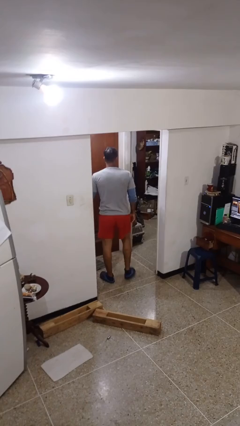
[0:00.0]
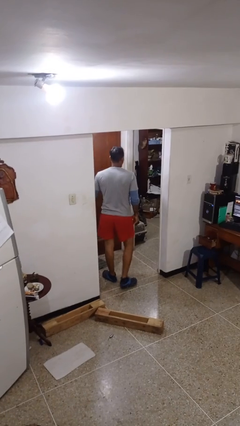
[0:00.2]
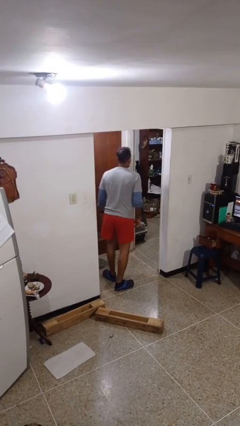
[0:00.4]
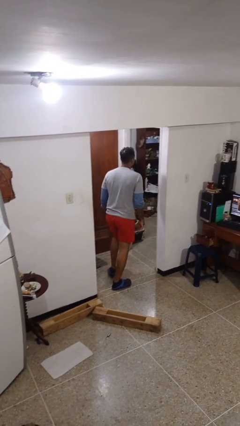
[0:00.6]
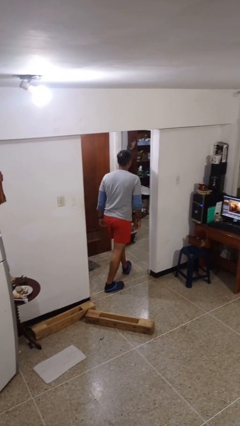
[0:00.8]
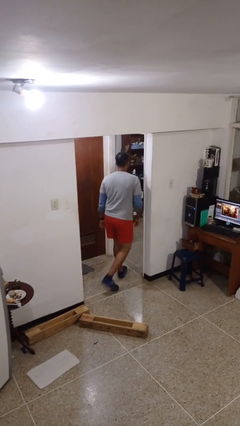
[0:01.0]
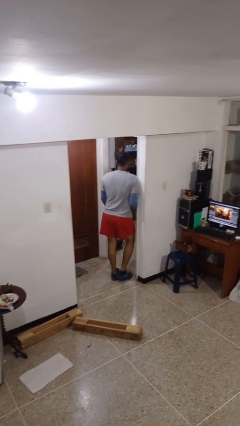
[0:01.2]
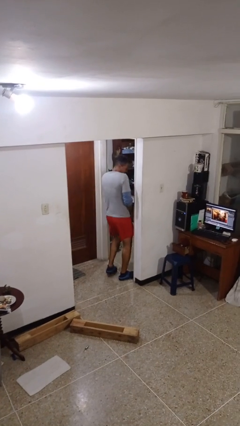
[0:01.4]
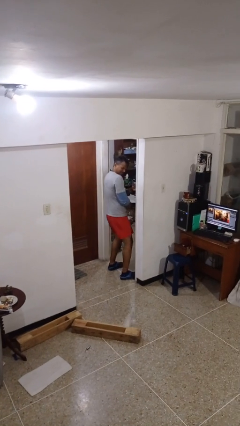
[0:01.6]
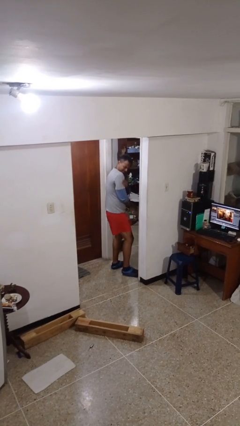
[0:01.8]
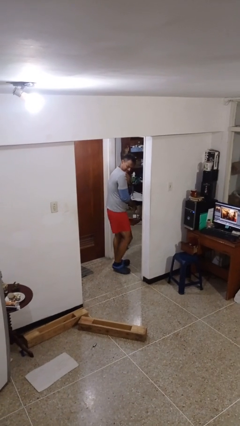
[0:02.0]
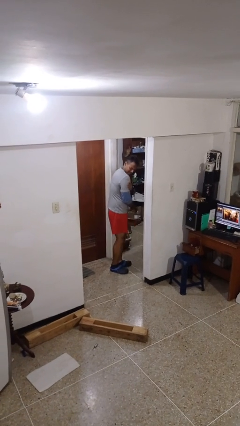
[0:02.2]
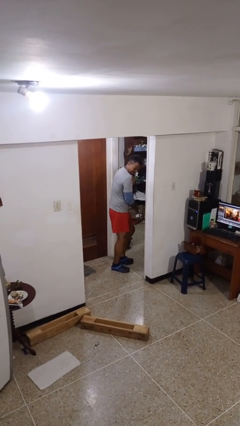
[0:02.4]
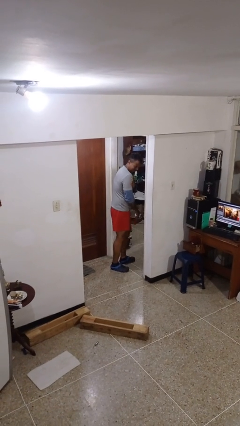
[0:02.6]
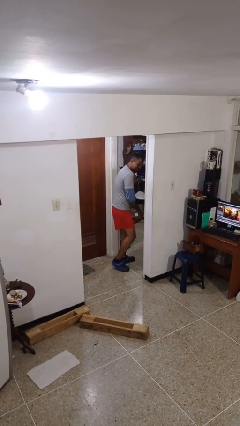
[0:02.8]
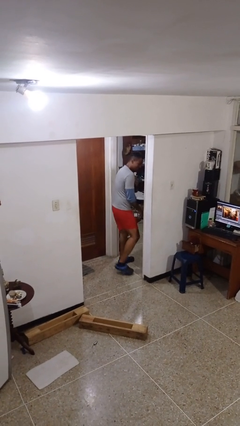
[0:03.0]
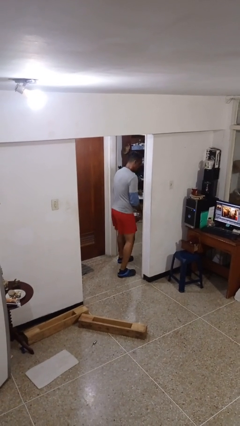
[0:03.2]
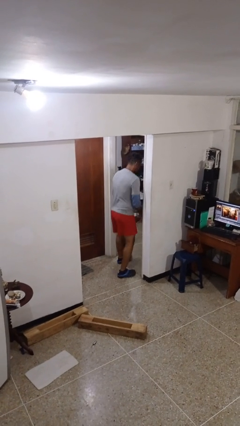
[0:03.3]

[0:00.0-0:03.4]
person bumps into wall

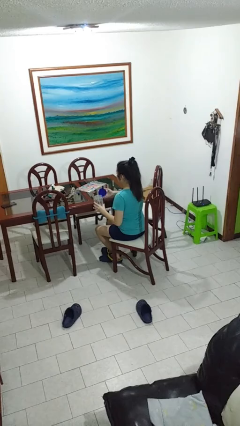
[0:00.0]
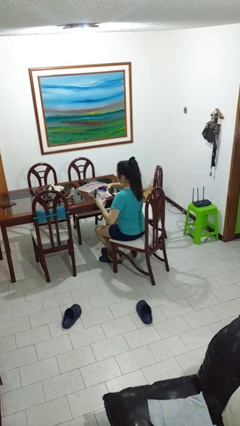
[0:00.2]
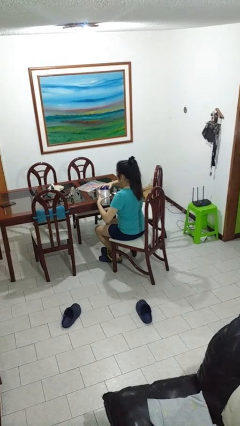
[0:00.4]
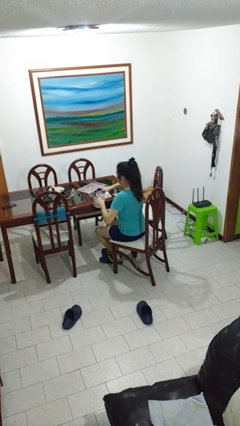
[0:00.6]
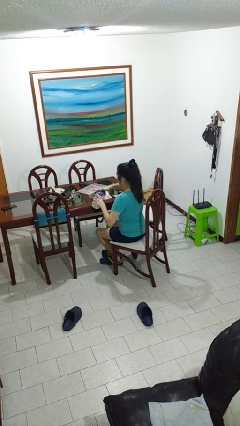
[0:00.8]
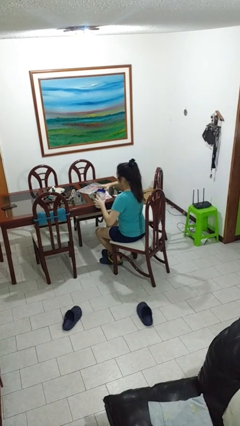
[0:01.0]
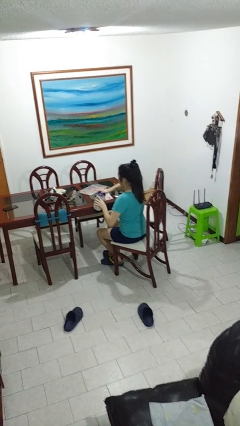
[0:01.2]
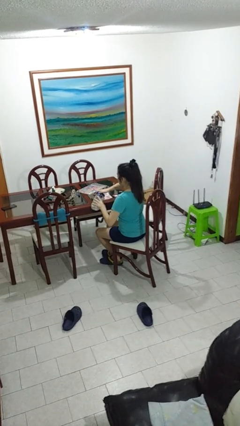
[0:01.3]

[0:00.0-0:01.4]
person closes jar

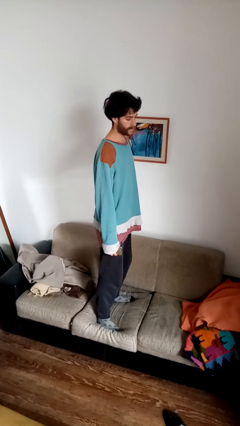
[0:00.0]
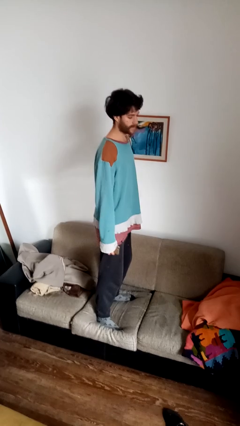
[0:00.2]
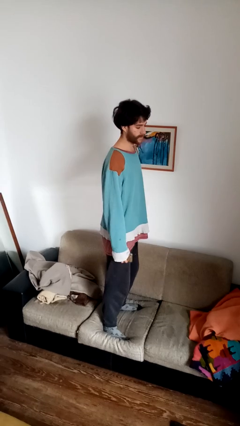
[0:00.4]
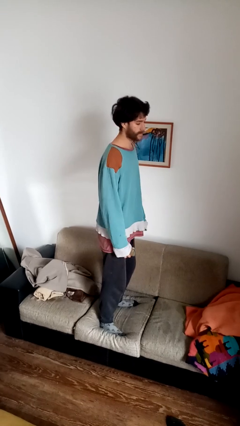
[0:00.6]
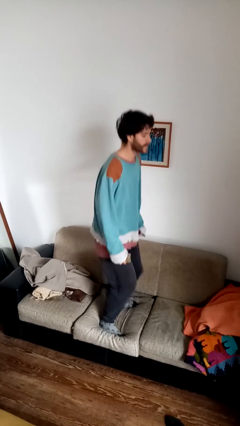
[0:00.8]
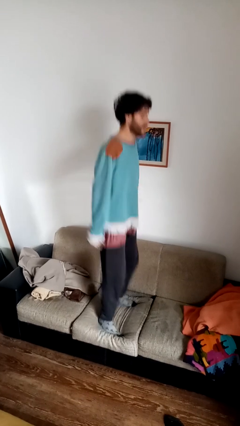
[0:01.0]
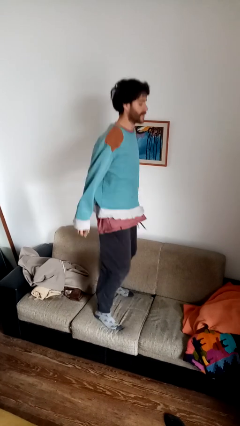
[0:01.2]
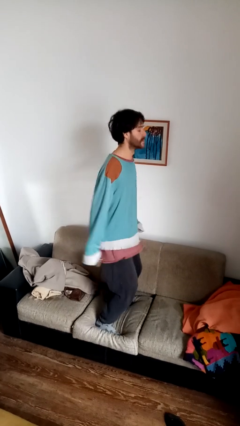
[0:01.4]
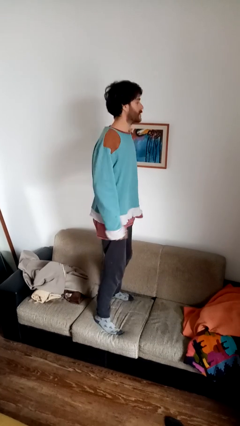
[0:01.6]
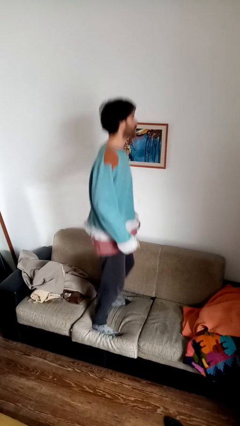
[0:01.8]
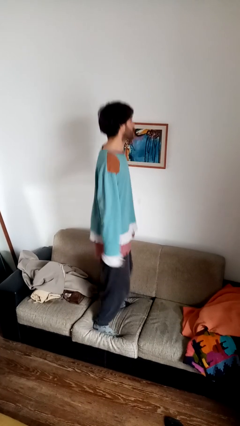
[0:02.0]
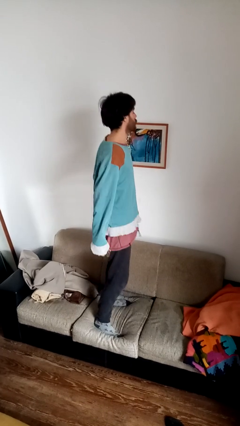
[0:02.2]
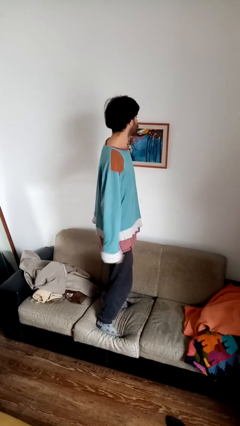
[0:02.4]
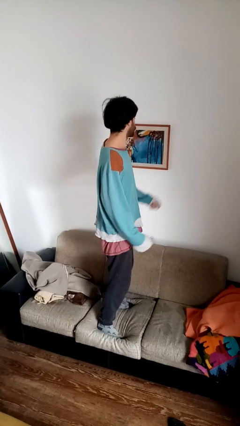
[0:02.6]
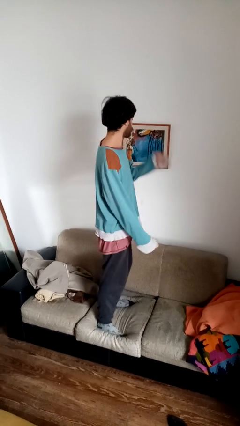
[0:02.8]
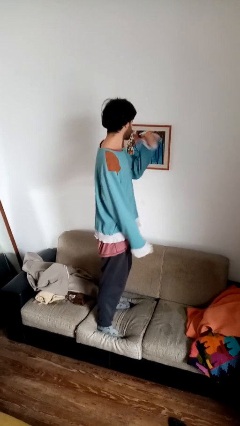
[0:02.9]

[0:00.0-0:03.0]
person jumps on couch

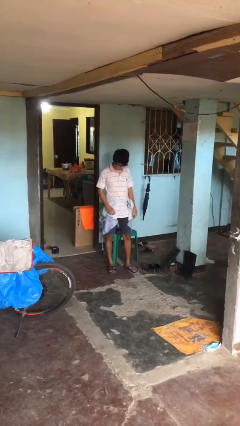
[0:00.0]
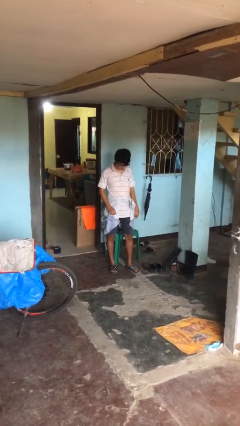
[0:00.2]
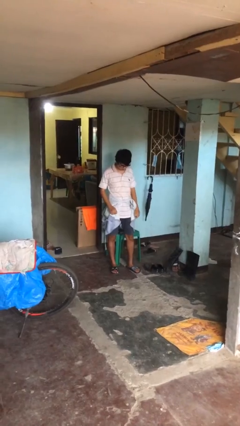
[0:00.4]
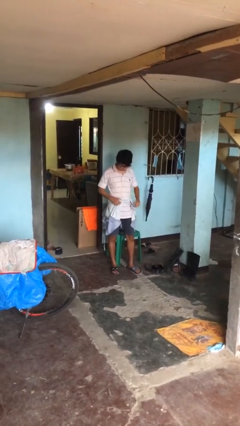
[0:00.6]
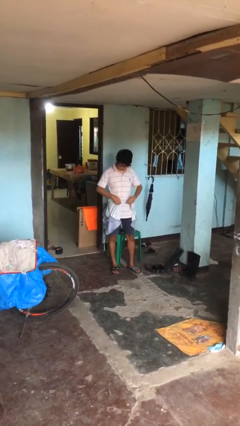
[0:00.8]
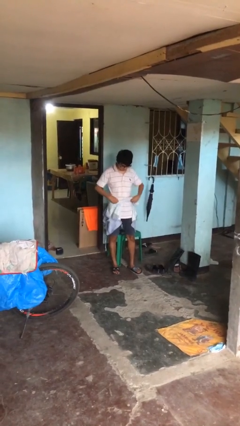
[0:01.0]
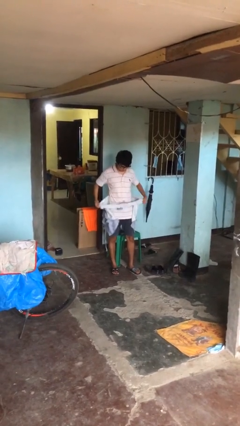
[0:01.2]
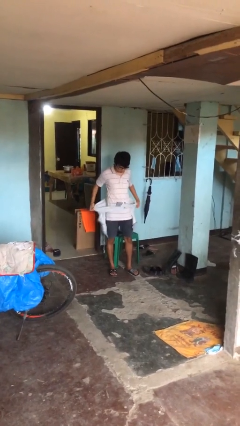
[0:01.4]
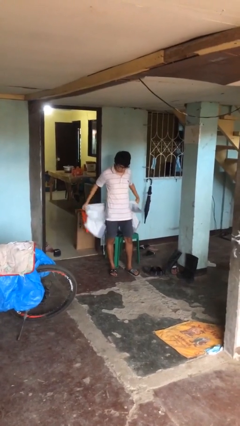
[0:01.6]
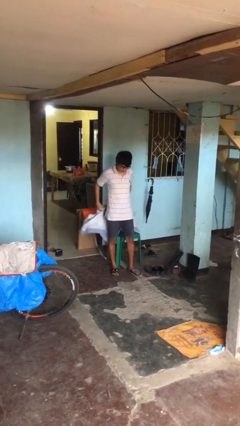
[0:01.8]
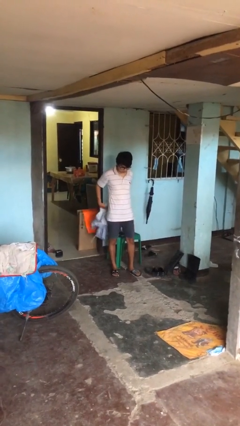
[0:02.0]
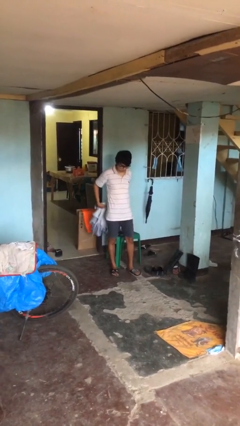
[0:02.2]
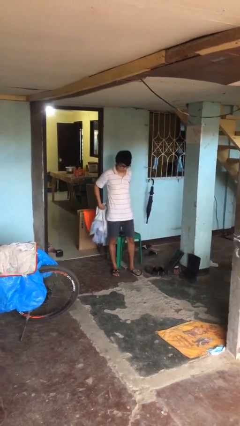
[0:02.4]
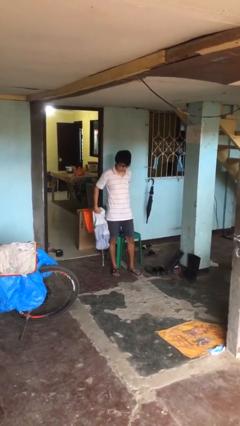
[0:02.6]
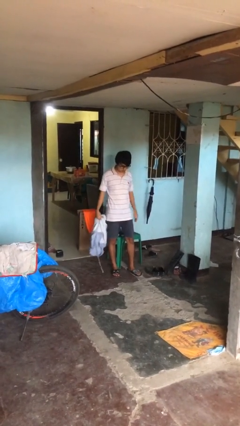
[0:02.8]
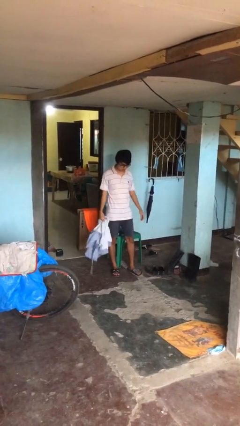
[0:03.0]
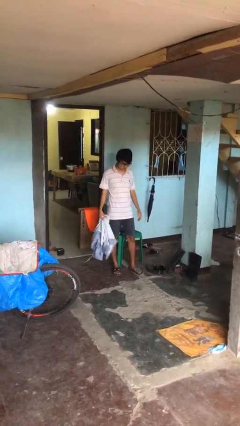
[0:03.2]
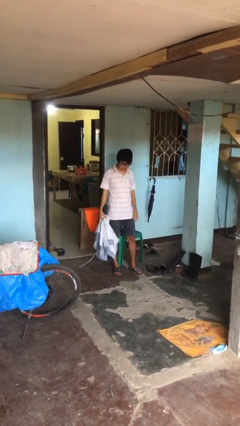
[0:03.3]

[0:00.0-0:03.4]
person unties jacket around waist

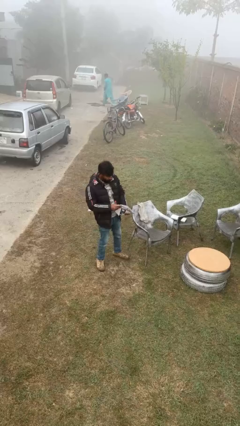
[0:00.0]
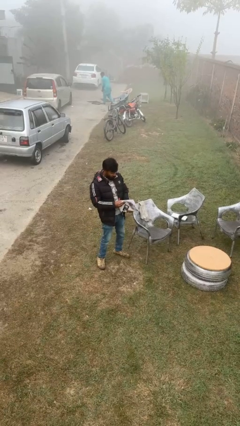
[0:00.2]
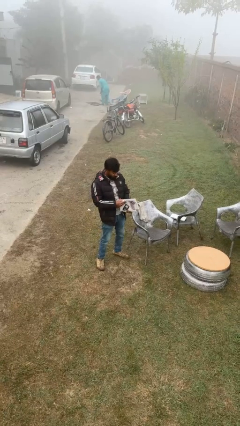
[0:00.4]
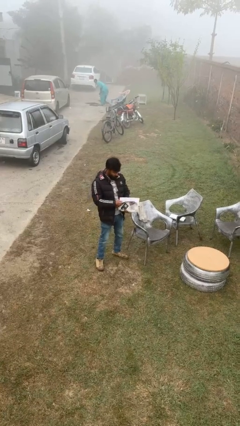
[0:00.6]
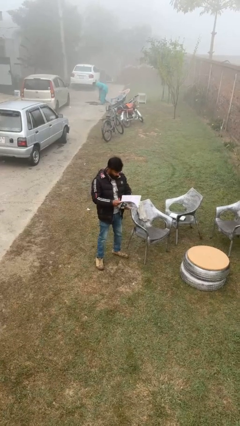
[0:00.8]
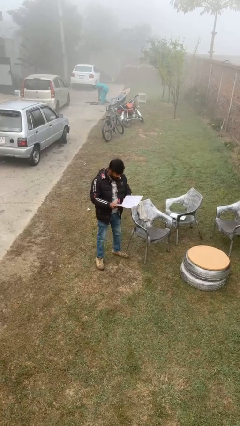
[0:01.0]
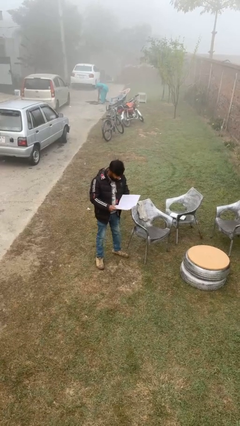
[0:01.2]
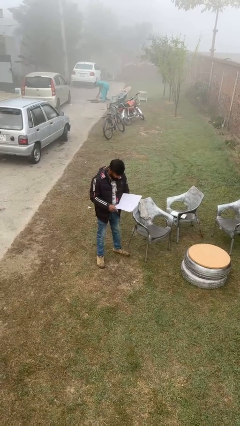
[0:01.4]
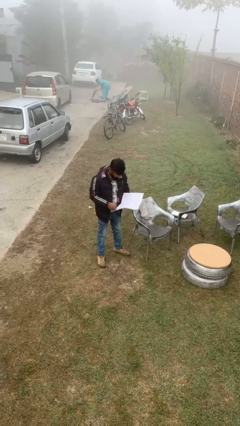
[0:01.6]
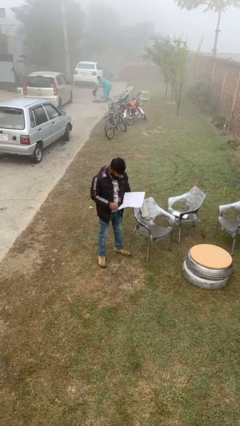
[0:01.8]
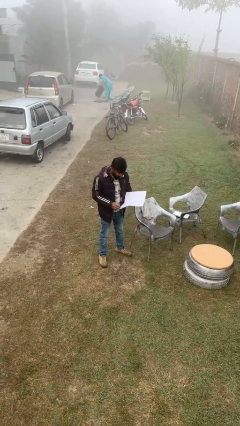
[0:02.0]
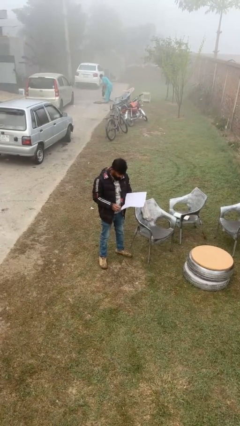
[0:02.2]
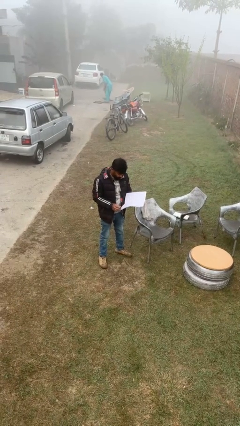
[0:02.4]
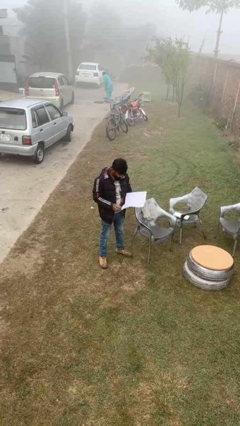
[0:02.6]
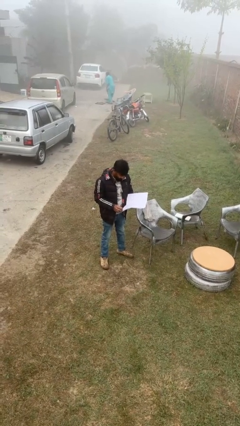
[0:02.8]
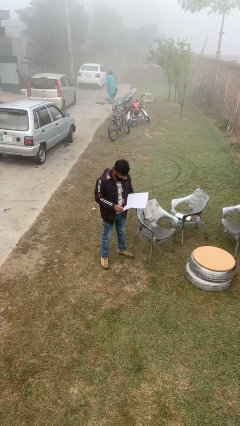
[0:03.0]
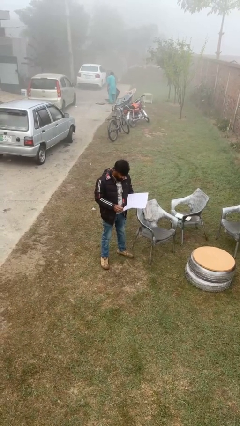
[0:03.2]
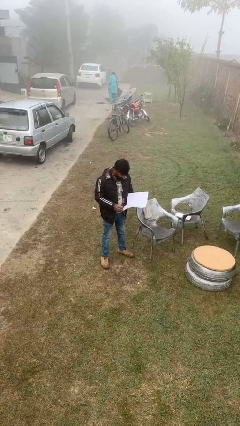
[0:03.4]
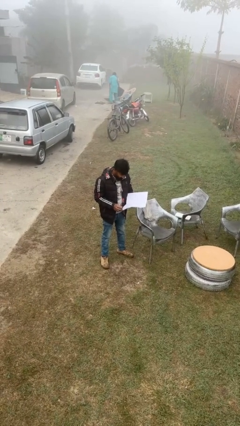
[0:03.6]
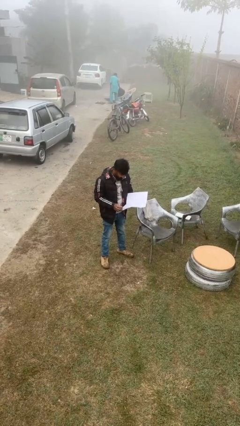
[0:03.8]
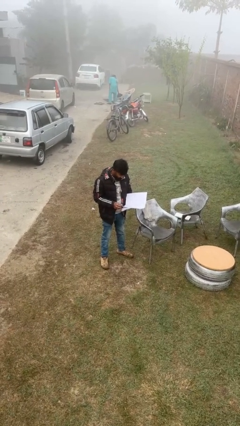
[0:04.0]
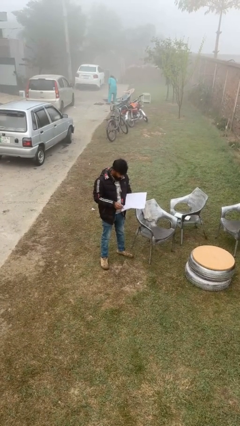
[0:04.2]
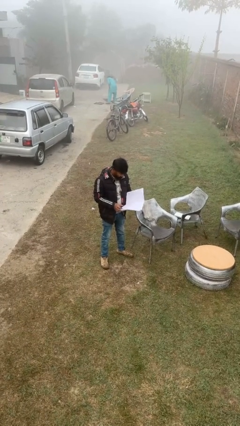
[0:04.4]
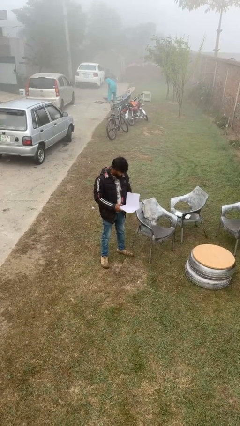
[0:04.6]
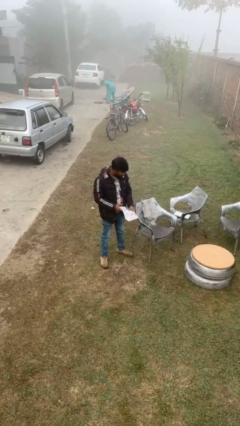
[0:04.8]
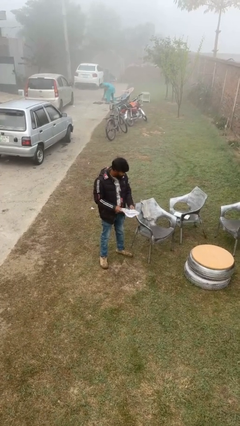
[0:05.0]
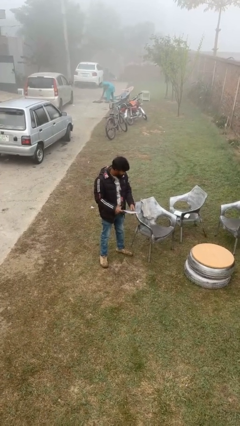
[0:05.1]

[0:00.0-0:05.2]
person reads document

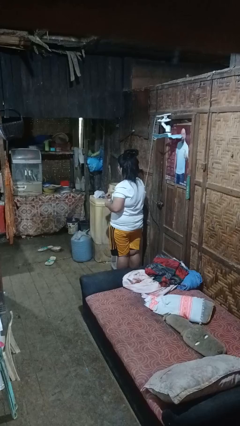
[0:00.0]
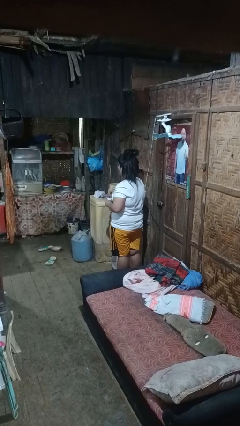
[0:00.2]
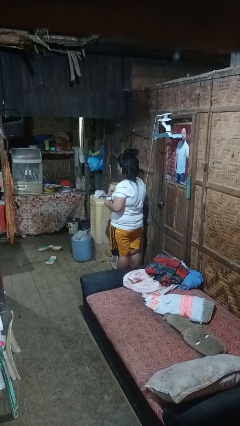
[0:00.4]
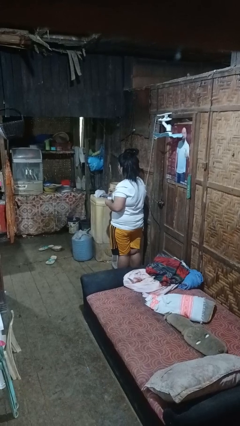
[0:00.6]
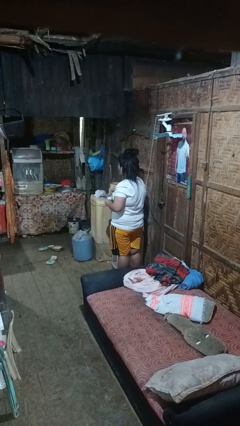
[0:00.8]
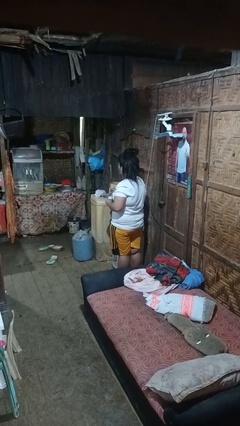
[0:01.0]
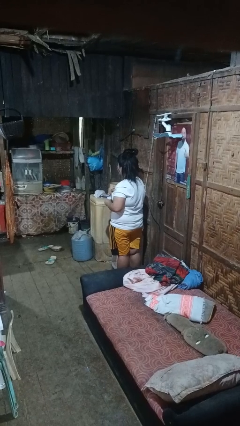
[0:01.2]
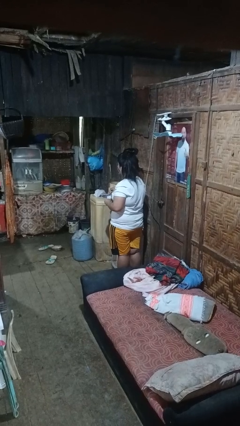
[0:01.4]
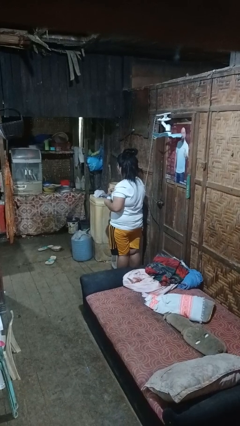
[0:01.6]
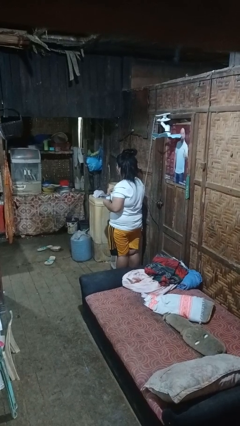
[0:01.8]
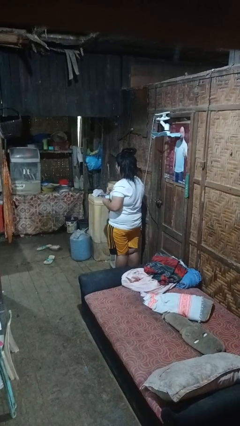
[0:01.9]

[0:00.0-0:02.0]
person stirs mug
